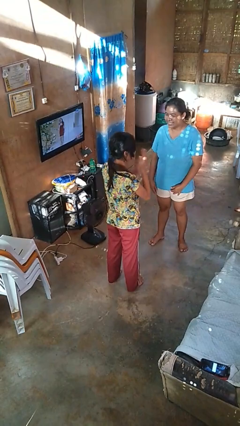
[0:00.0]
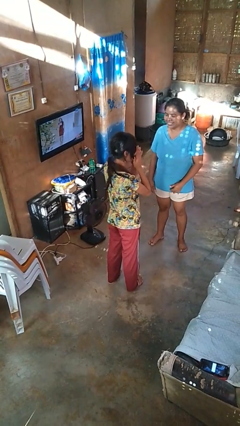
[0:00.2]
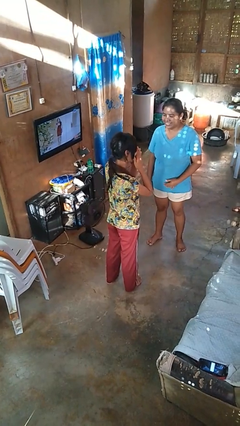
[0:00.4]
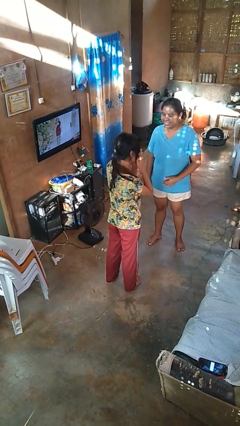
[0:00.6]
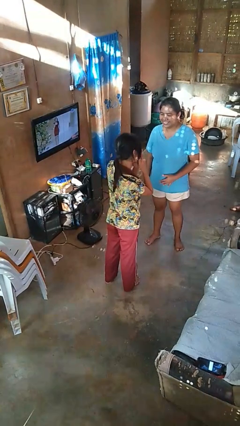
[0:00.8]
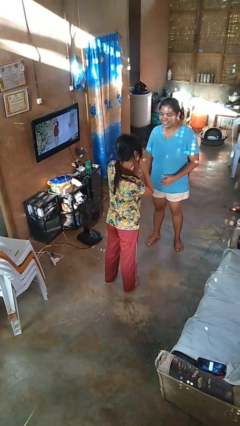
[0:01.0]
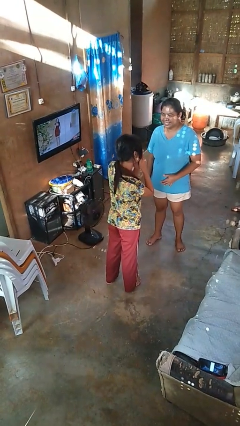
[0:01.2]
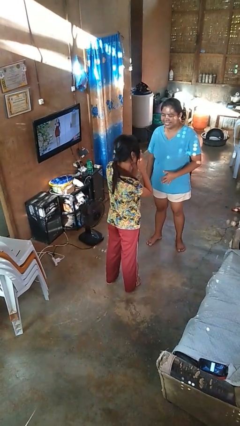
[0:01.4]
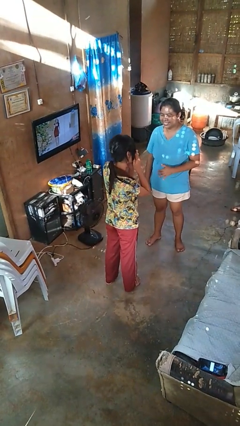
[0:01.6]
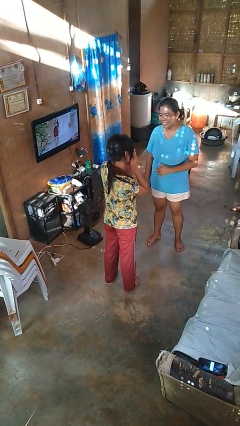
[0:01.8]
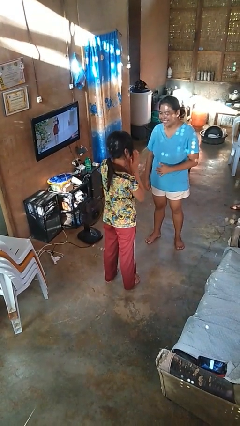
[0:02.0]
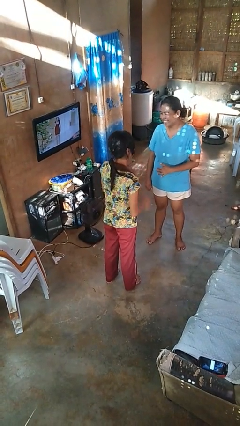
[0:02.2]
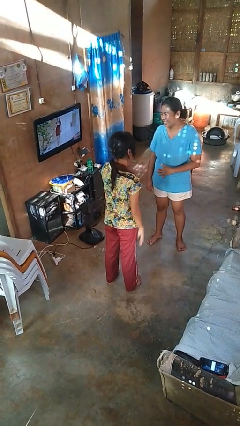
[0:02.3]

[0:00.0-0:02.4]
person laughs with person

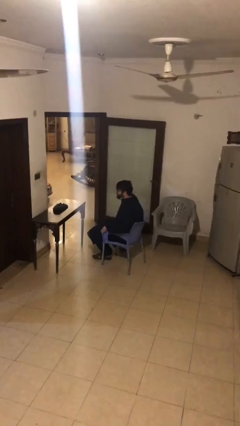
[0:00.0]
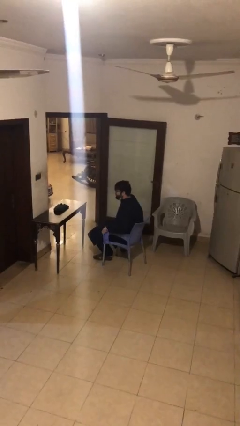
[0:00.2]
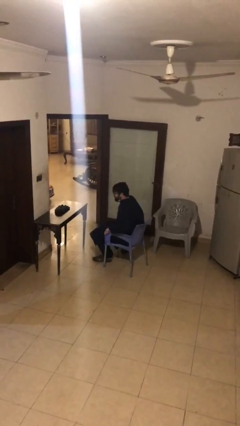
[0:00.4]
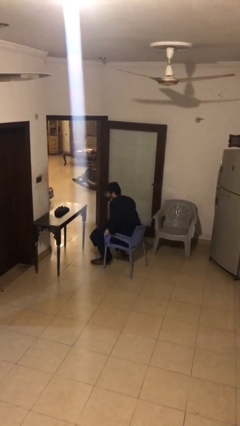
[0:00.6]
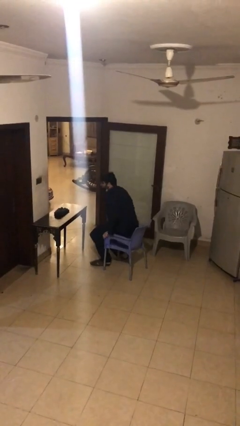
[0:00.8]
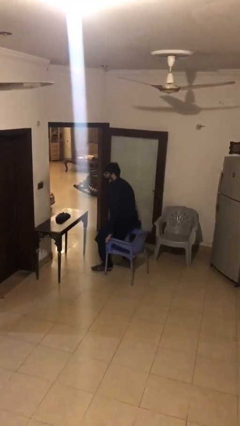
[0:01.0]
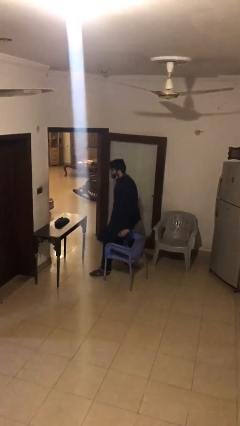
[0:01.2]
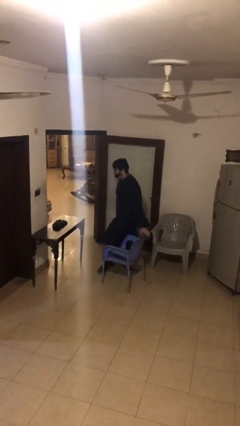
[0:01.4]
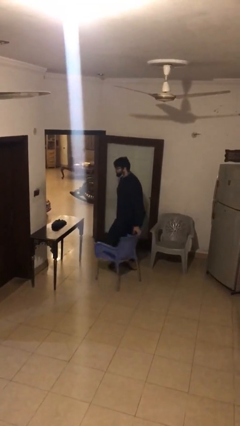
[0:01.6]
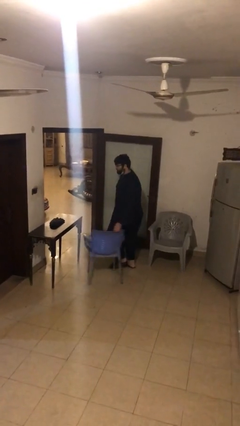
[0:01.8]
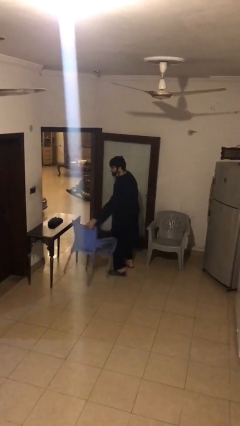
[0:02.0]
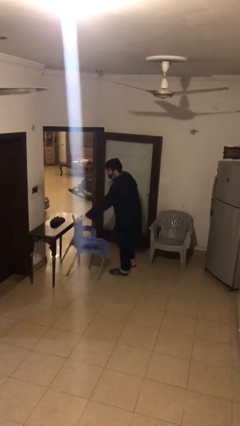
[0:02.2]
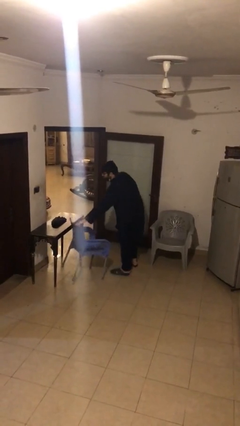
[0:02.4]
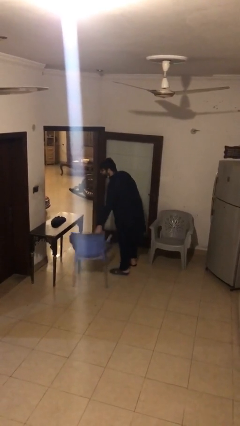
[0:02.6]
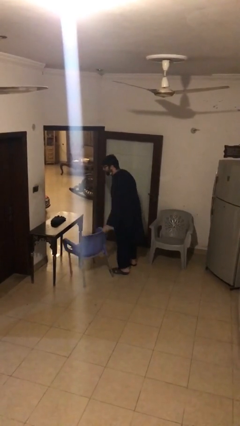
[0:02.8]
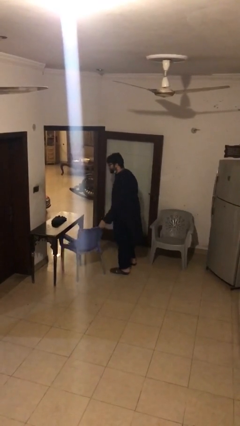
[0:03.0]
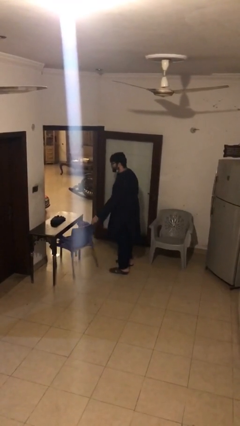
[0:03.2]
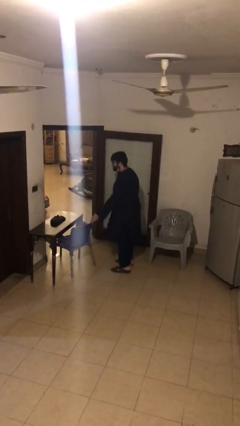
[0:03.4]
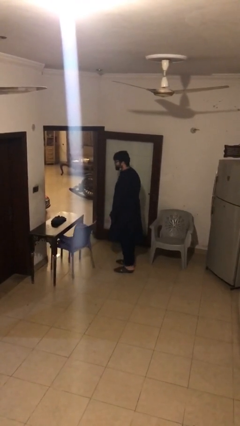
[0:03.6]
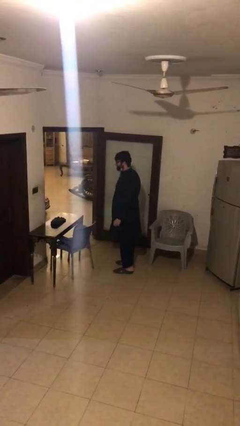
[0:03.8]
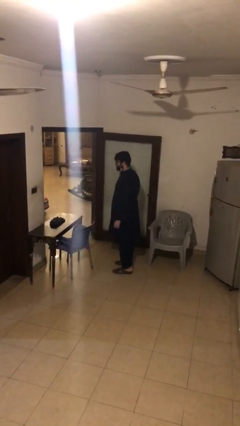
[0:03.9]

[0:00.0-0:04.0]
person stands up

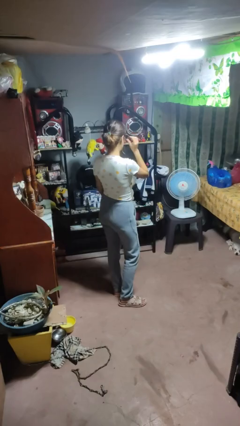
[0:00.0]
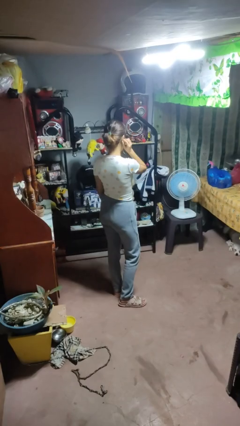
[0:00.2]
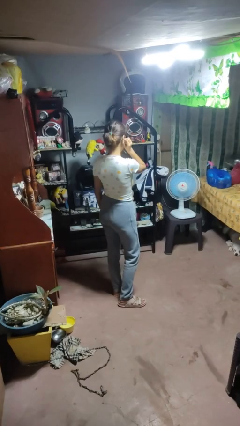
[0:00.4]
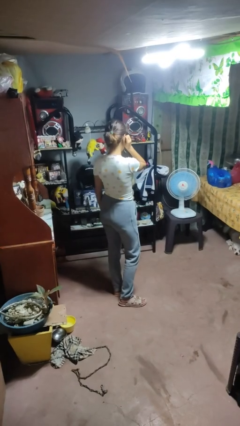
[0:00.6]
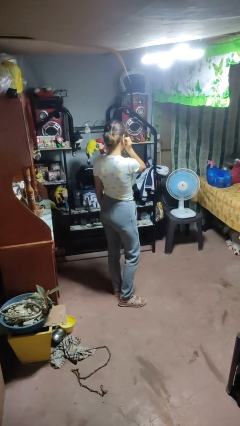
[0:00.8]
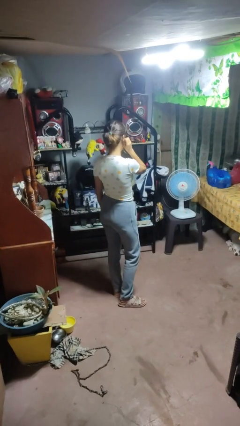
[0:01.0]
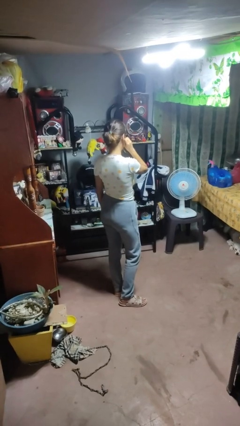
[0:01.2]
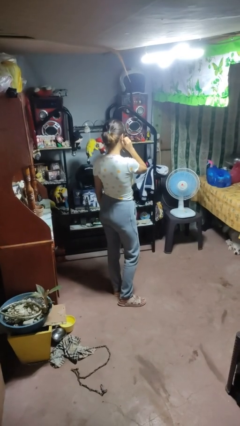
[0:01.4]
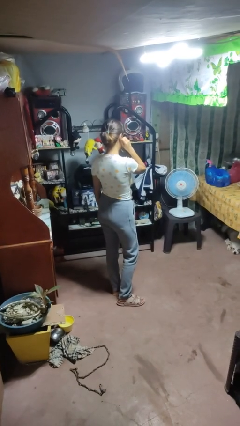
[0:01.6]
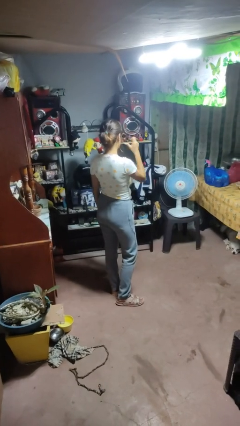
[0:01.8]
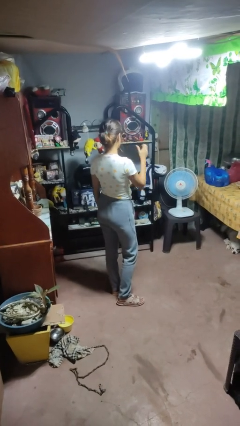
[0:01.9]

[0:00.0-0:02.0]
person touches earlobe

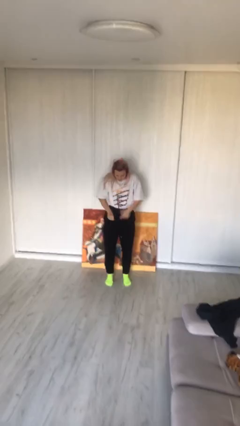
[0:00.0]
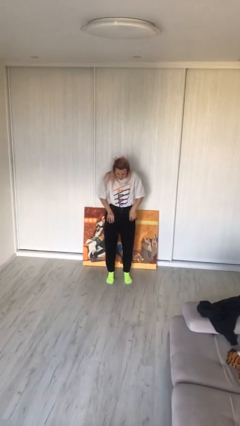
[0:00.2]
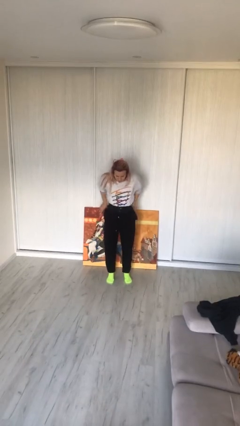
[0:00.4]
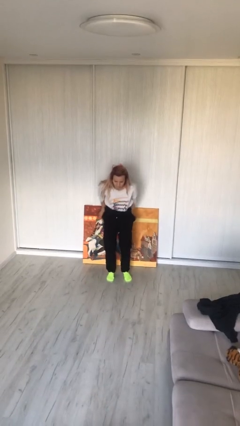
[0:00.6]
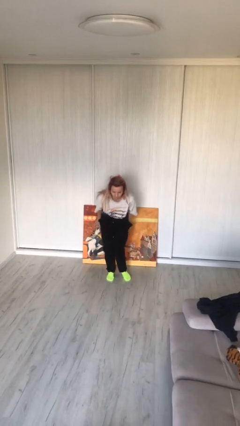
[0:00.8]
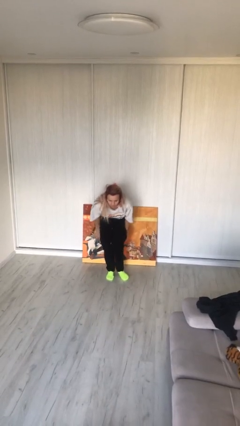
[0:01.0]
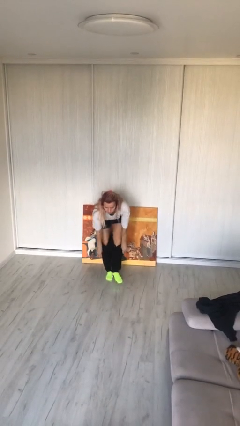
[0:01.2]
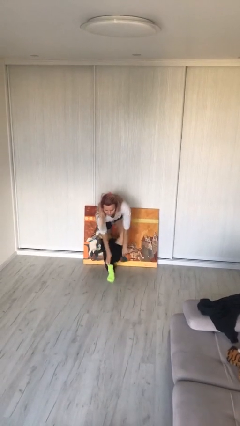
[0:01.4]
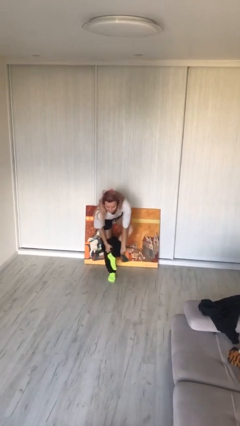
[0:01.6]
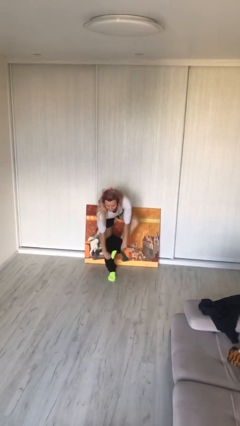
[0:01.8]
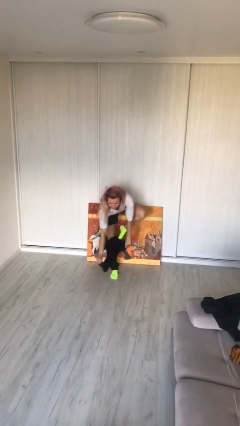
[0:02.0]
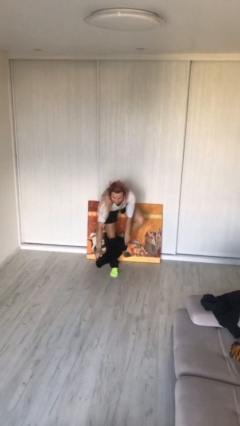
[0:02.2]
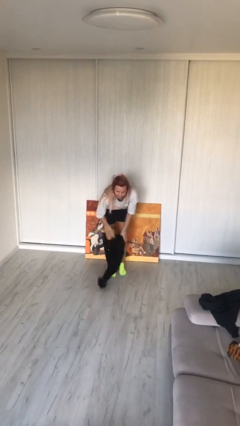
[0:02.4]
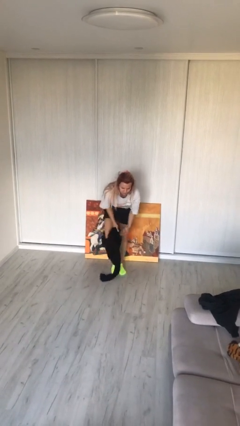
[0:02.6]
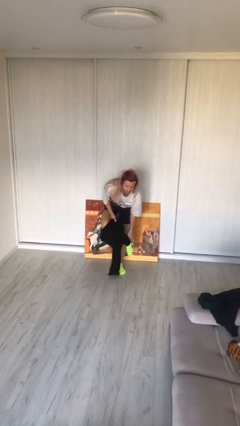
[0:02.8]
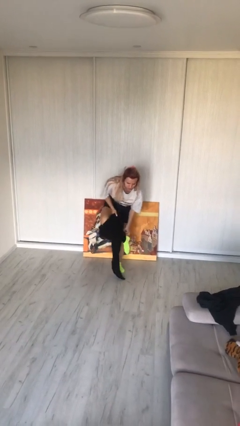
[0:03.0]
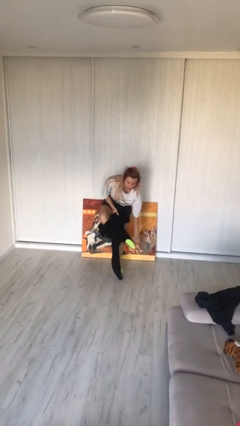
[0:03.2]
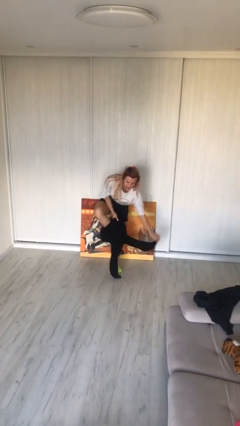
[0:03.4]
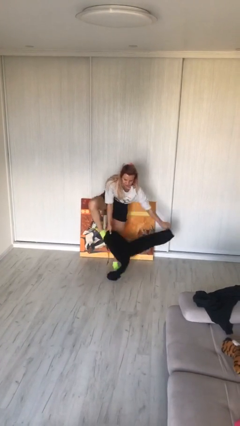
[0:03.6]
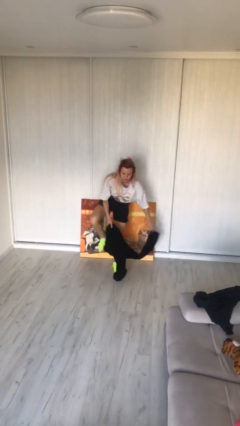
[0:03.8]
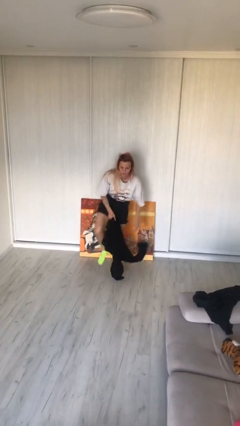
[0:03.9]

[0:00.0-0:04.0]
person takes off pants

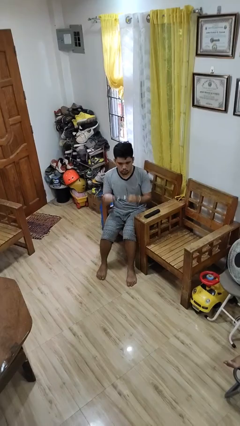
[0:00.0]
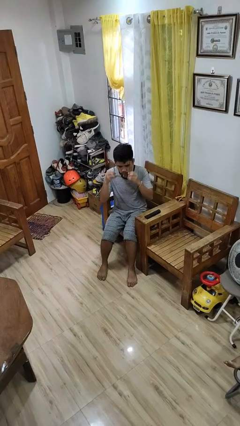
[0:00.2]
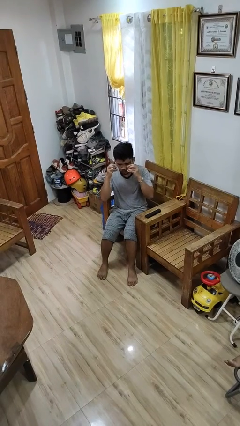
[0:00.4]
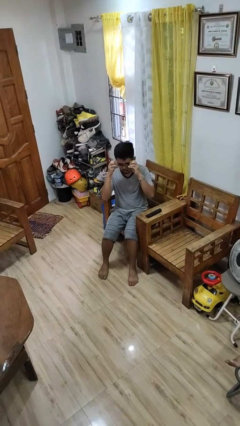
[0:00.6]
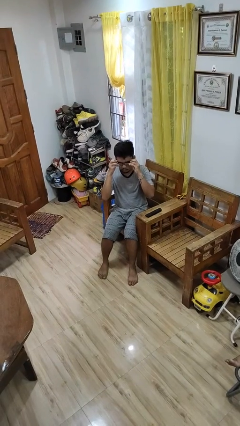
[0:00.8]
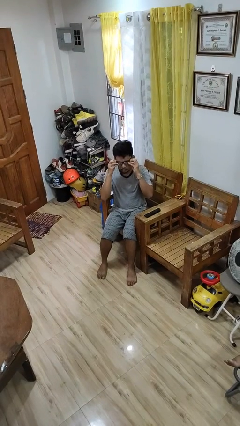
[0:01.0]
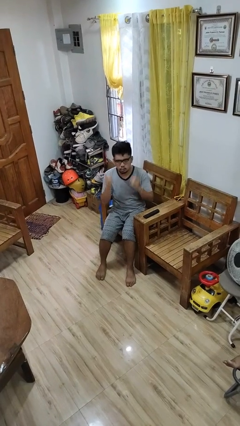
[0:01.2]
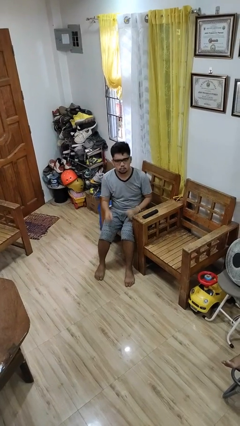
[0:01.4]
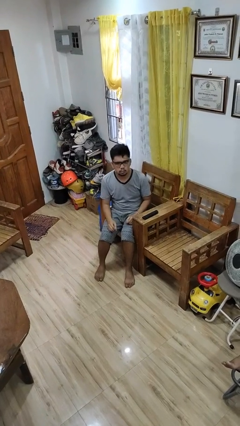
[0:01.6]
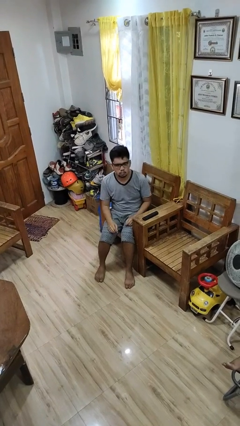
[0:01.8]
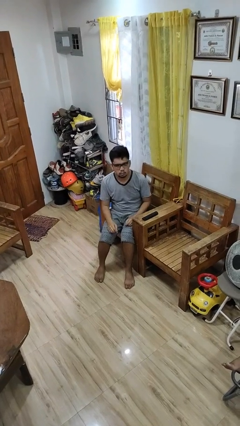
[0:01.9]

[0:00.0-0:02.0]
person puts on glasses

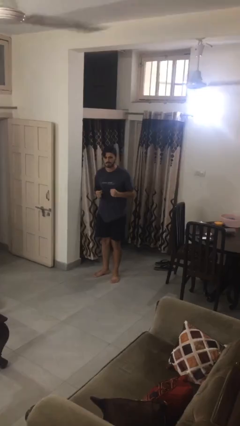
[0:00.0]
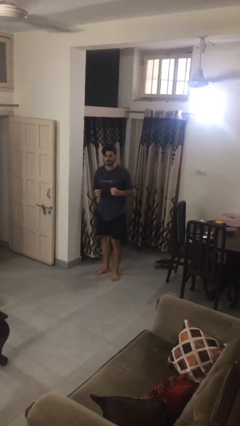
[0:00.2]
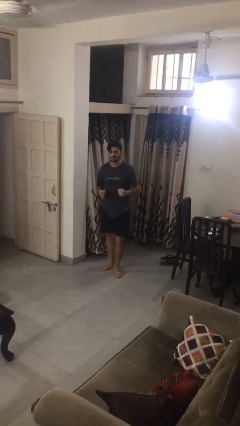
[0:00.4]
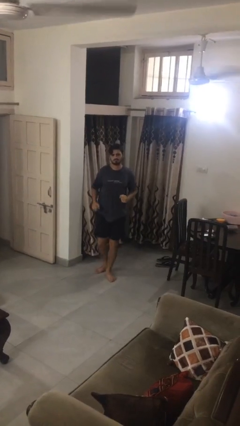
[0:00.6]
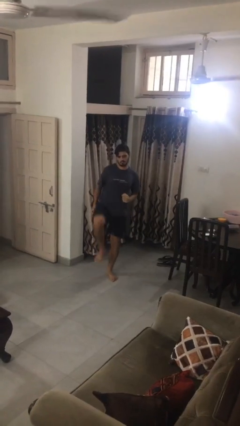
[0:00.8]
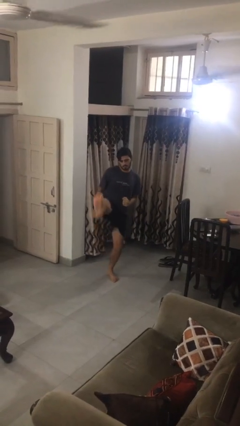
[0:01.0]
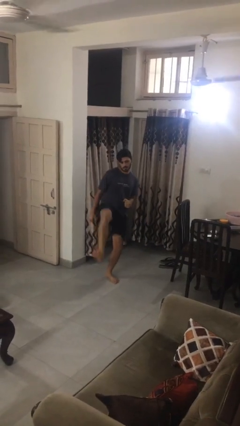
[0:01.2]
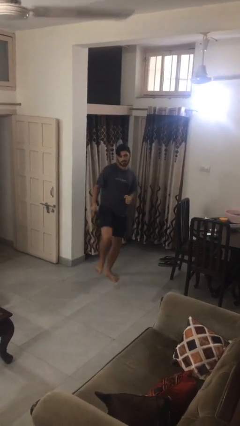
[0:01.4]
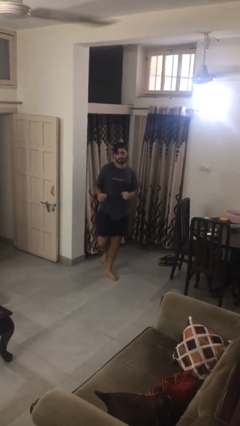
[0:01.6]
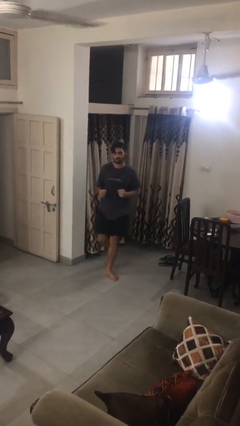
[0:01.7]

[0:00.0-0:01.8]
person karate kicks

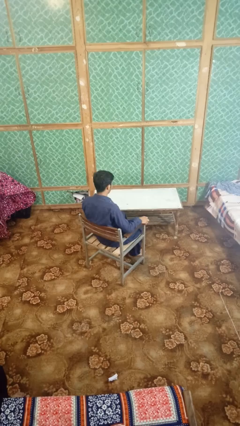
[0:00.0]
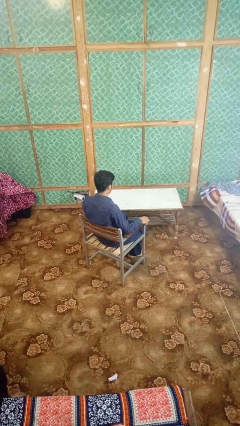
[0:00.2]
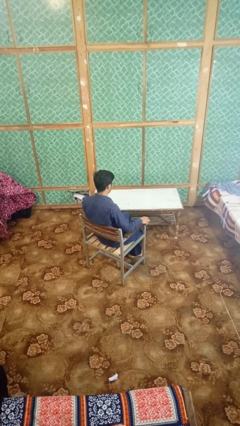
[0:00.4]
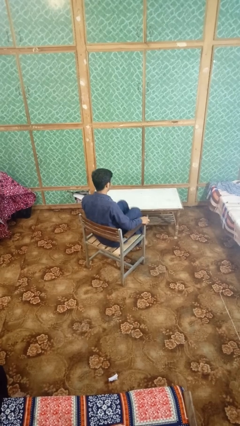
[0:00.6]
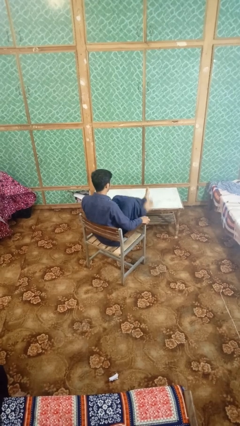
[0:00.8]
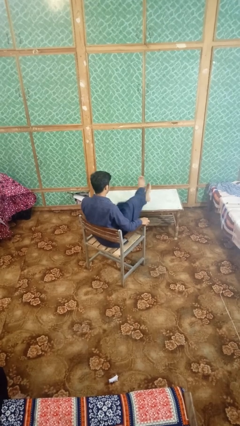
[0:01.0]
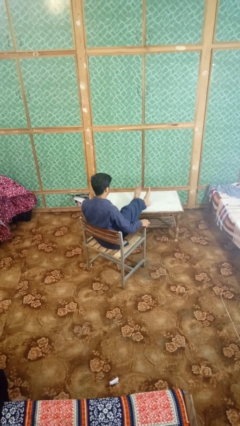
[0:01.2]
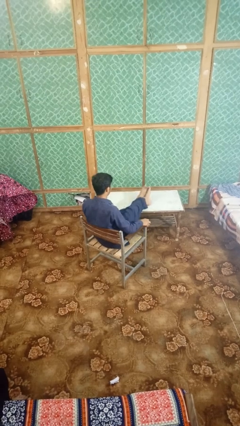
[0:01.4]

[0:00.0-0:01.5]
person puts feet up
